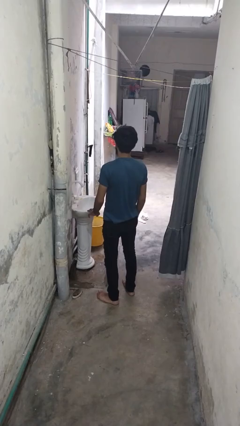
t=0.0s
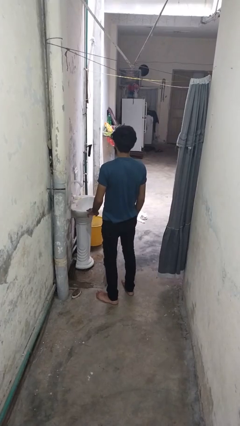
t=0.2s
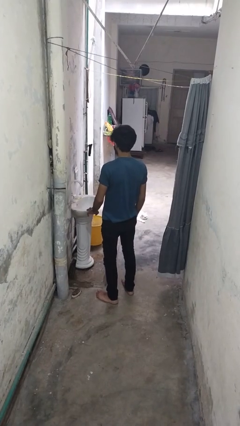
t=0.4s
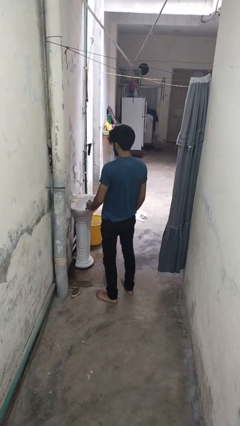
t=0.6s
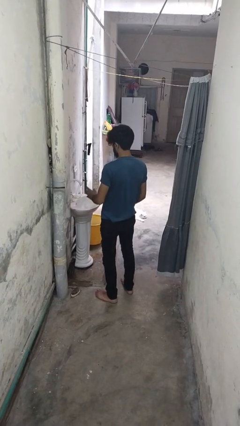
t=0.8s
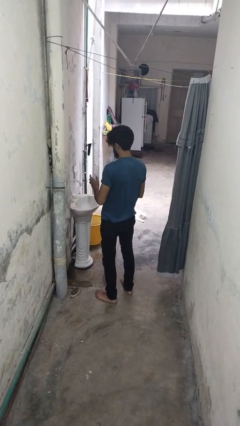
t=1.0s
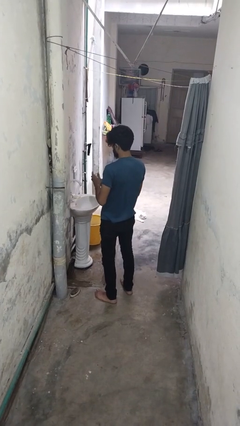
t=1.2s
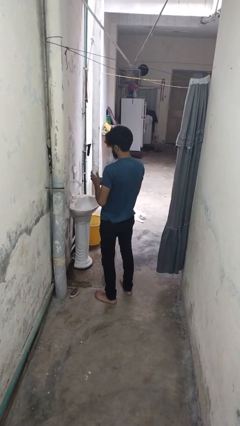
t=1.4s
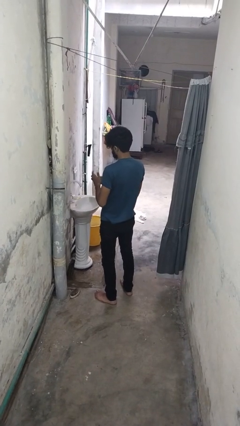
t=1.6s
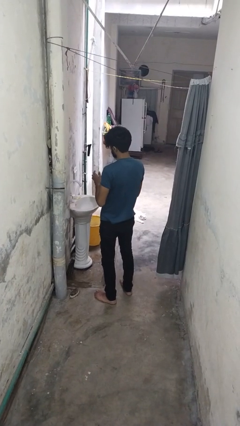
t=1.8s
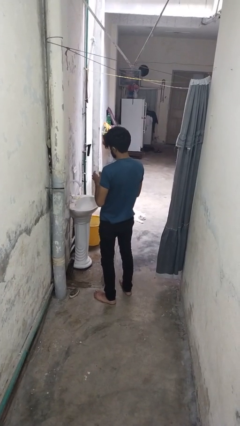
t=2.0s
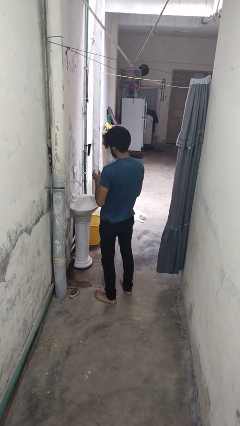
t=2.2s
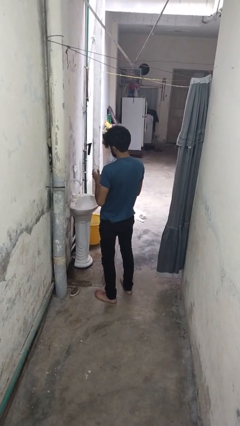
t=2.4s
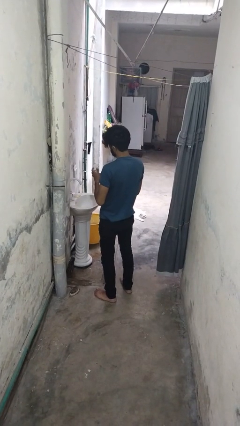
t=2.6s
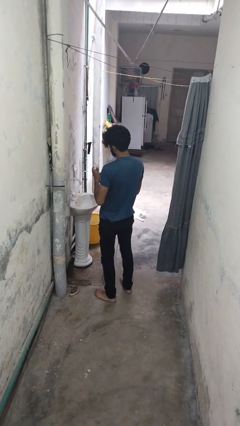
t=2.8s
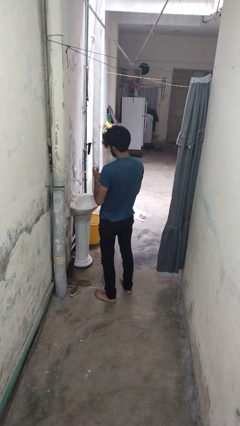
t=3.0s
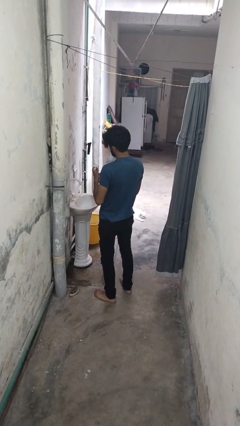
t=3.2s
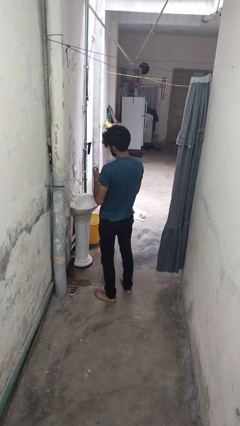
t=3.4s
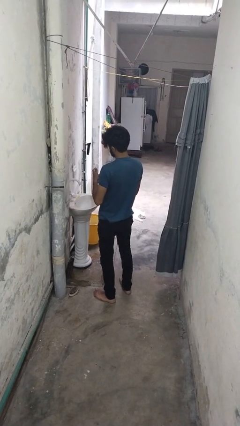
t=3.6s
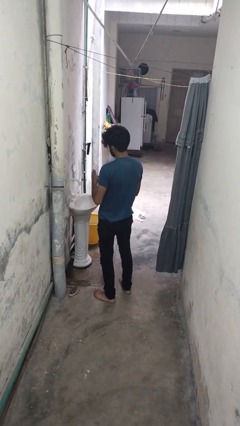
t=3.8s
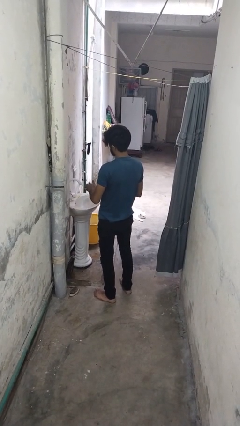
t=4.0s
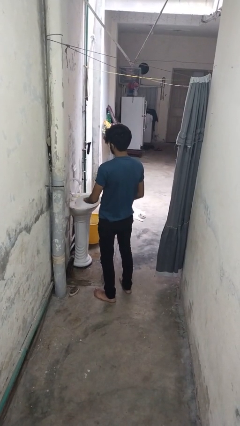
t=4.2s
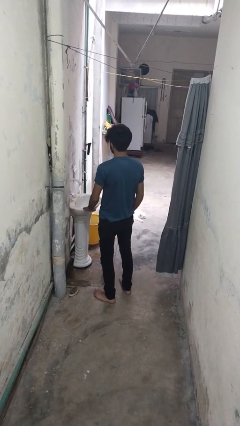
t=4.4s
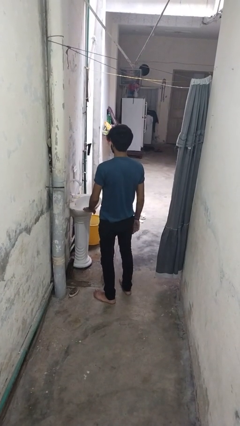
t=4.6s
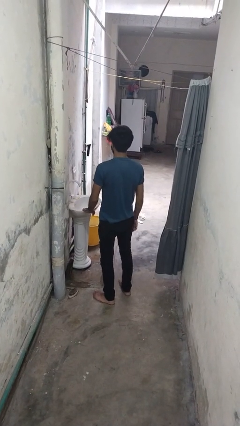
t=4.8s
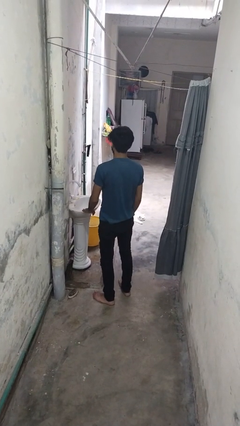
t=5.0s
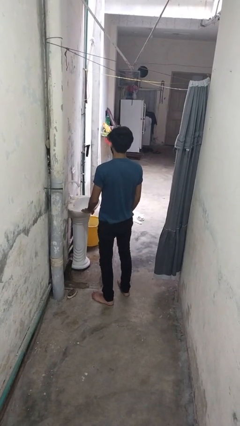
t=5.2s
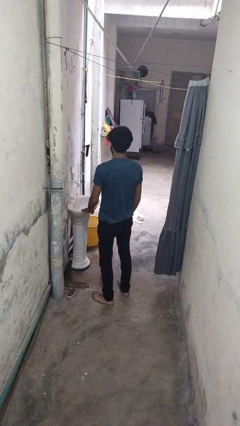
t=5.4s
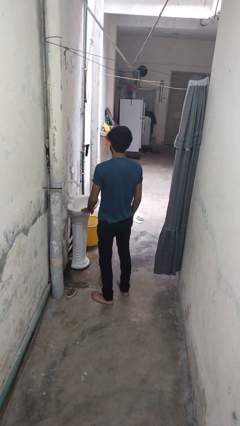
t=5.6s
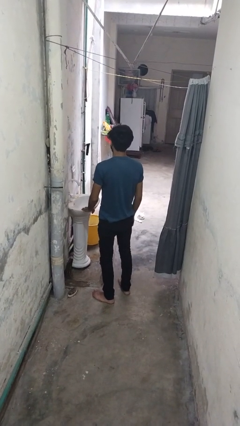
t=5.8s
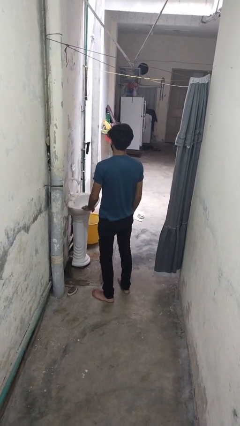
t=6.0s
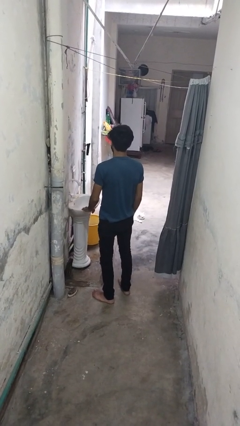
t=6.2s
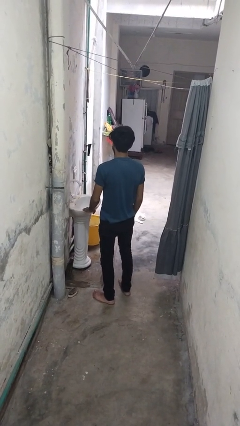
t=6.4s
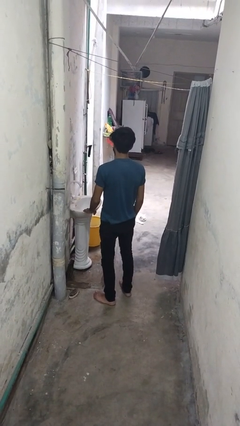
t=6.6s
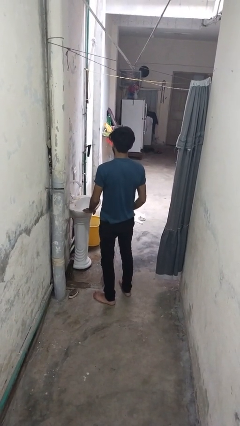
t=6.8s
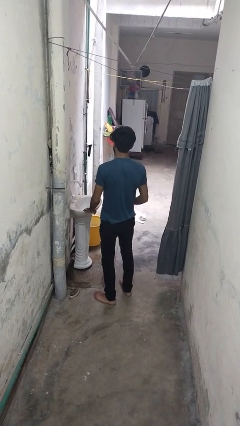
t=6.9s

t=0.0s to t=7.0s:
person puts on ring

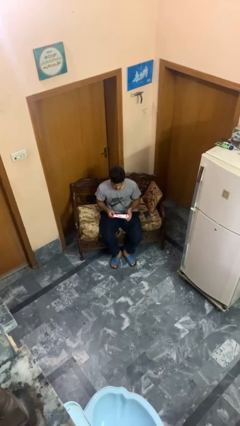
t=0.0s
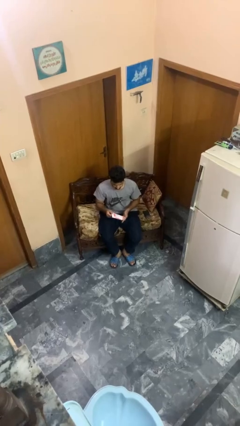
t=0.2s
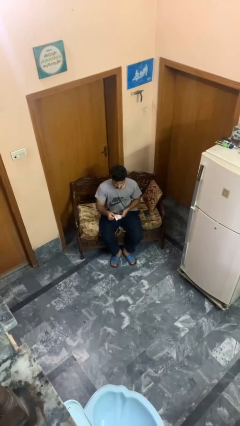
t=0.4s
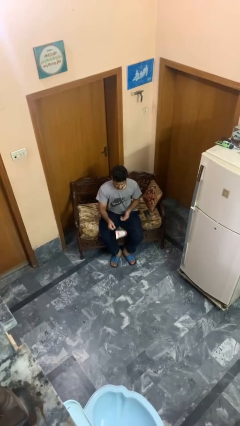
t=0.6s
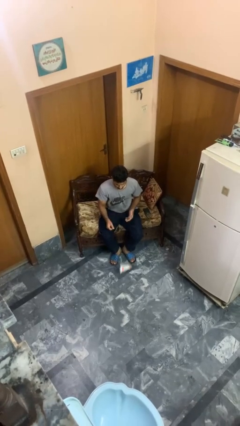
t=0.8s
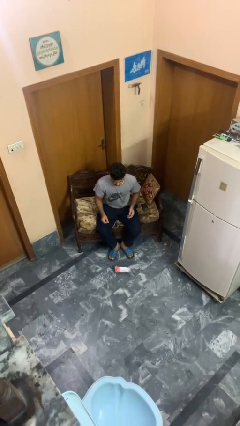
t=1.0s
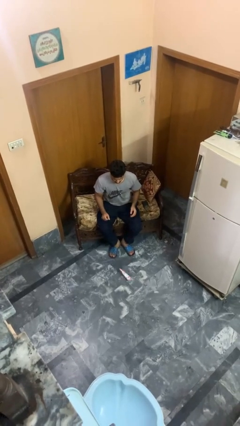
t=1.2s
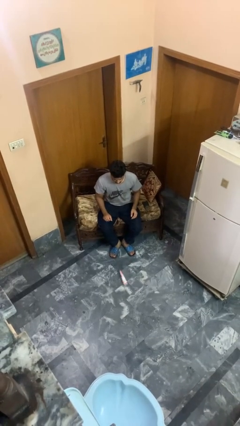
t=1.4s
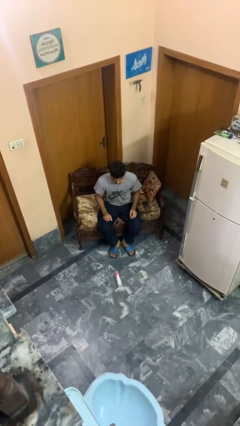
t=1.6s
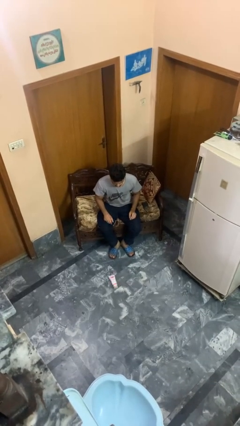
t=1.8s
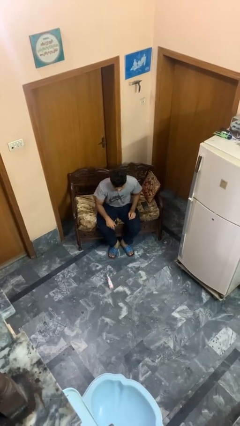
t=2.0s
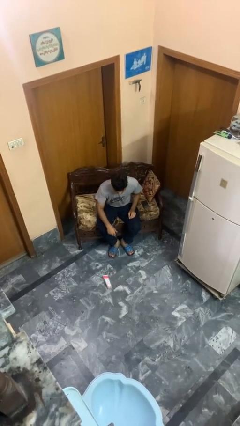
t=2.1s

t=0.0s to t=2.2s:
person drops object

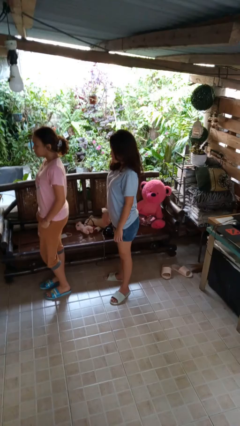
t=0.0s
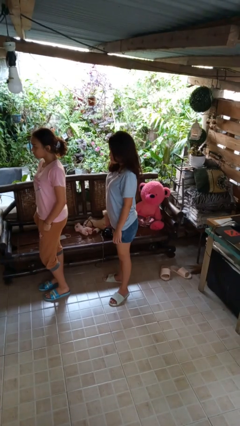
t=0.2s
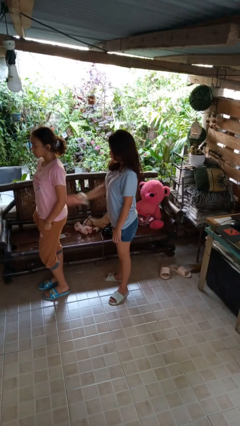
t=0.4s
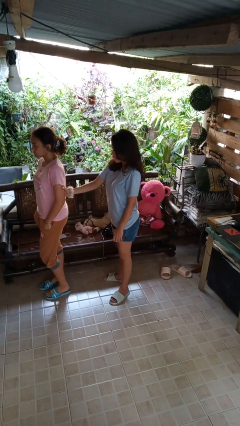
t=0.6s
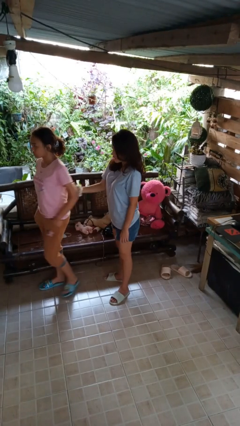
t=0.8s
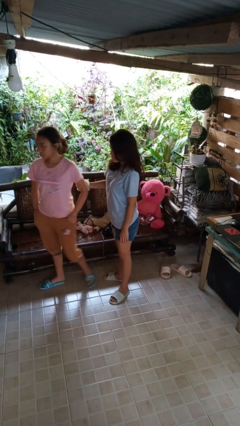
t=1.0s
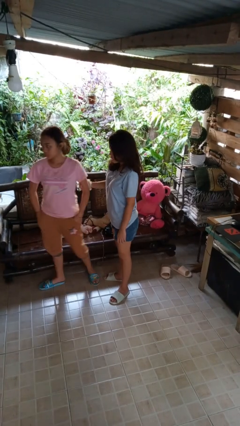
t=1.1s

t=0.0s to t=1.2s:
person grabs person by bicep

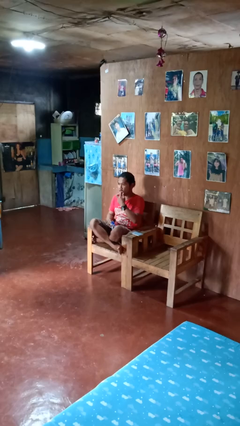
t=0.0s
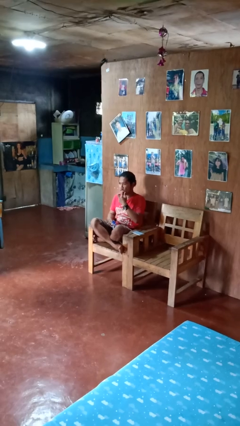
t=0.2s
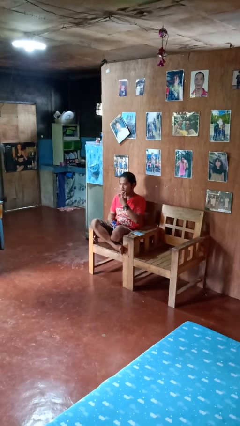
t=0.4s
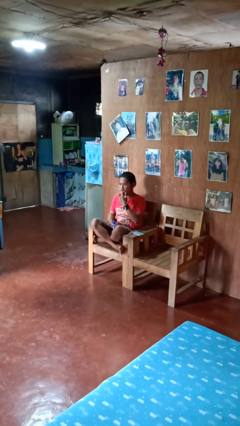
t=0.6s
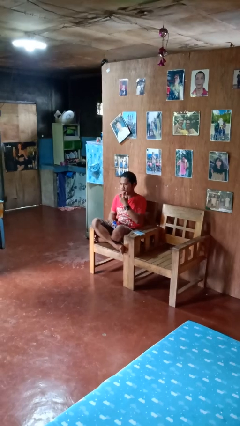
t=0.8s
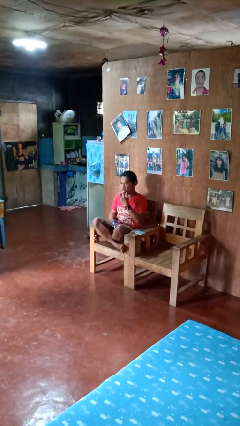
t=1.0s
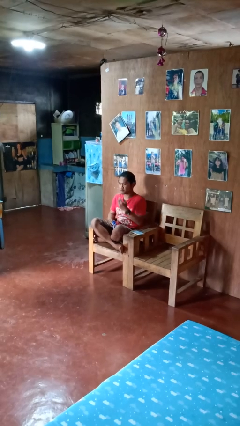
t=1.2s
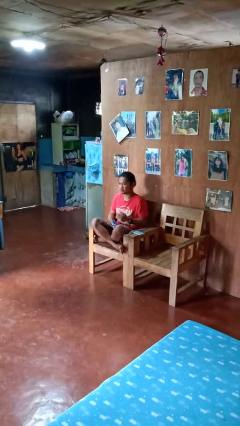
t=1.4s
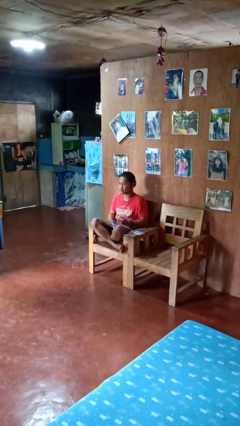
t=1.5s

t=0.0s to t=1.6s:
person licks fingers

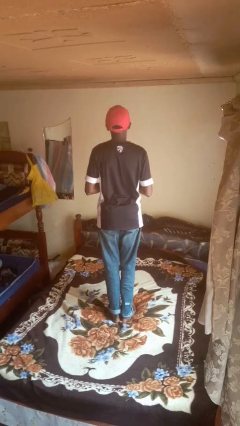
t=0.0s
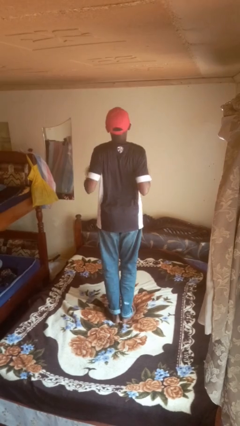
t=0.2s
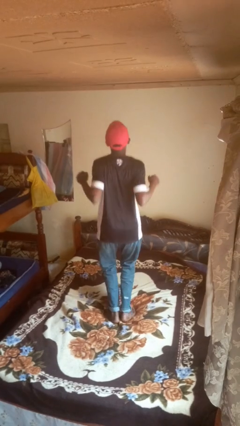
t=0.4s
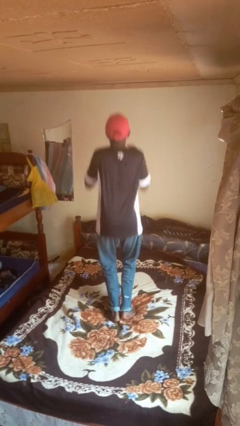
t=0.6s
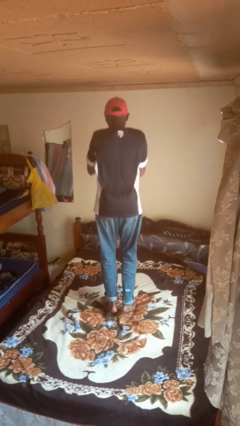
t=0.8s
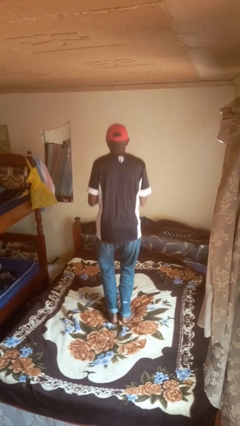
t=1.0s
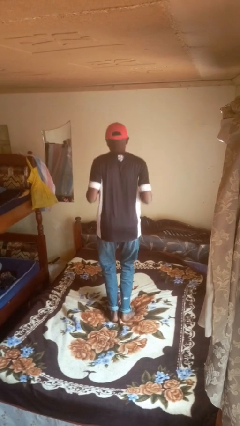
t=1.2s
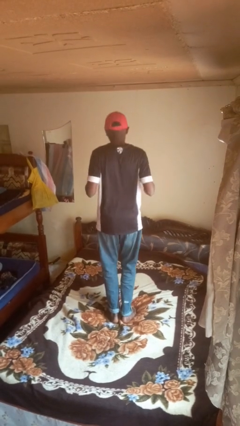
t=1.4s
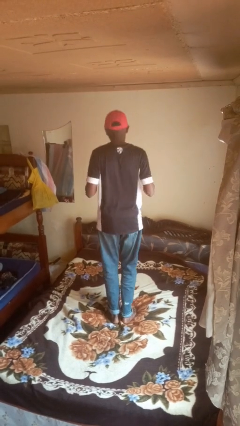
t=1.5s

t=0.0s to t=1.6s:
person jumps on bed

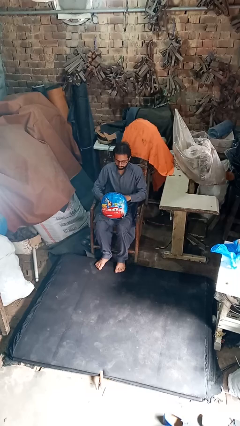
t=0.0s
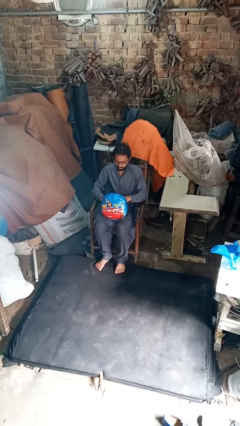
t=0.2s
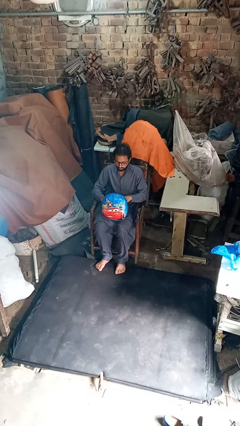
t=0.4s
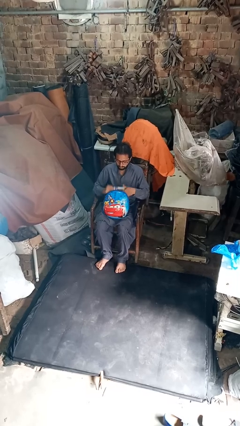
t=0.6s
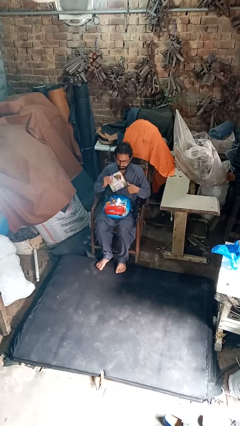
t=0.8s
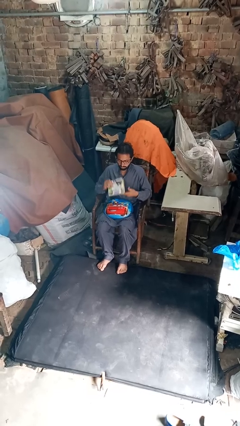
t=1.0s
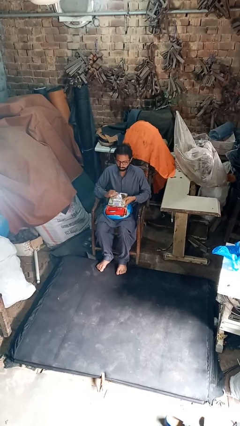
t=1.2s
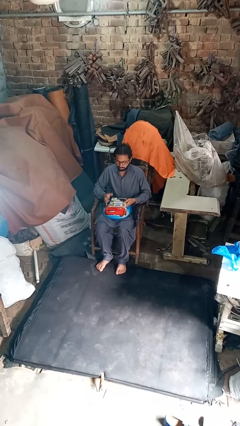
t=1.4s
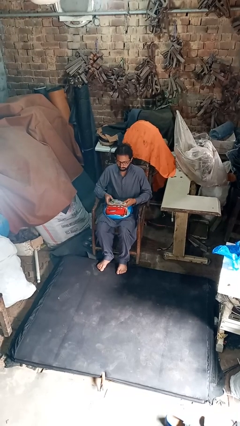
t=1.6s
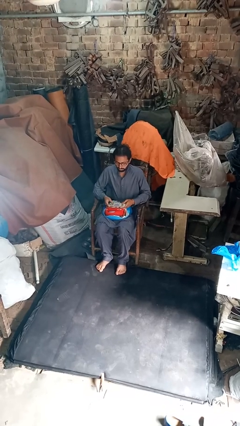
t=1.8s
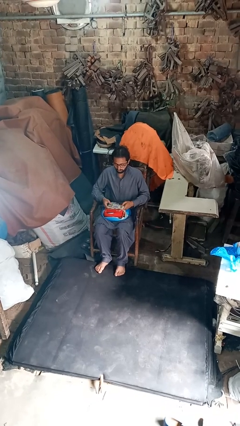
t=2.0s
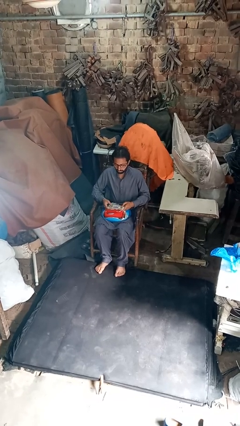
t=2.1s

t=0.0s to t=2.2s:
person takes object from purse

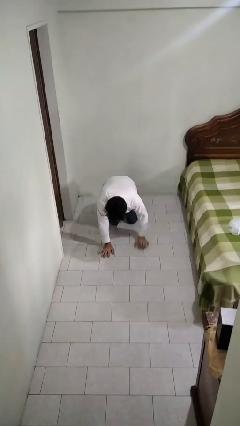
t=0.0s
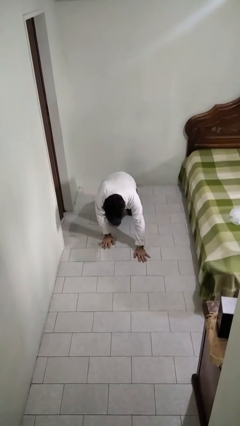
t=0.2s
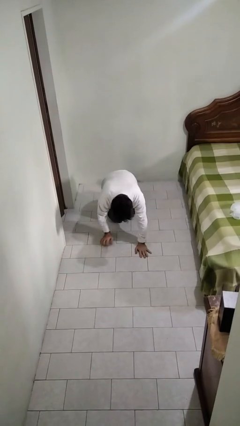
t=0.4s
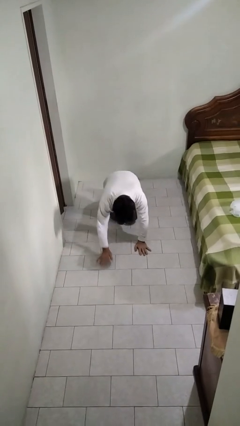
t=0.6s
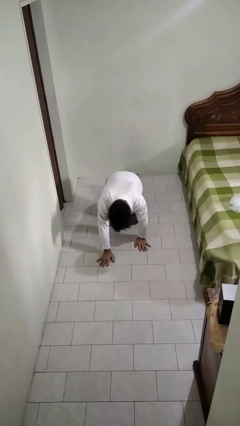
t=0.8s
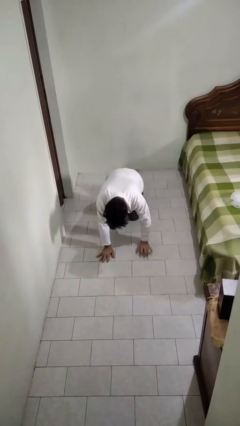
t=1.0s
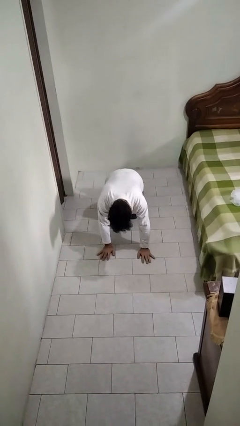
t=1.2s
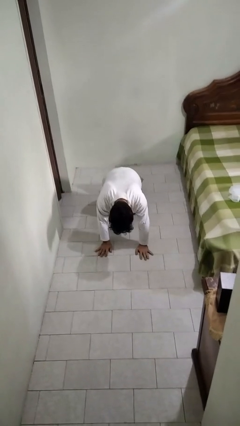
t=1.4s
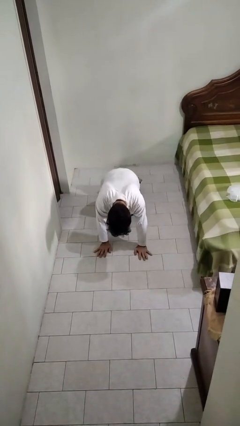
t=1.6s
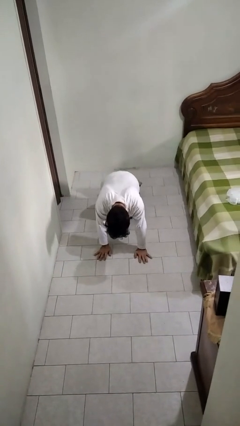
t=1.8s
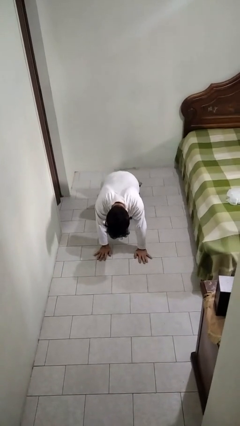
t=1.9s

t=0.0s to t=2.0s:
person crawls
